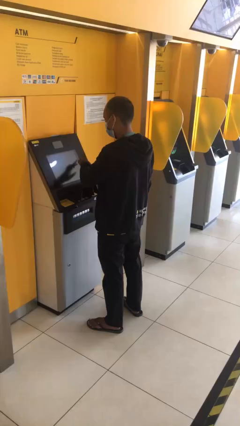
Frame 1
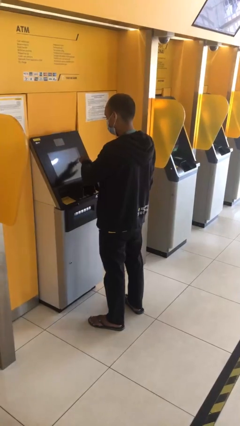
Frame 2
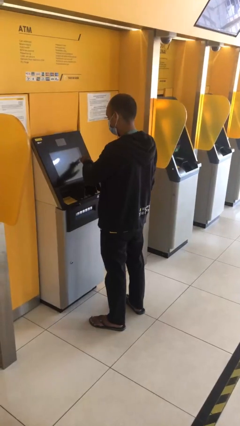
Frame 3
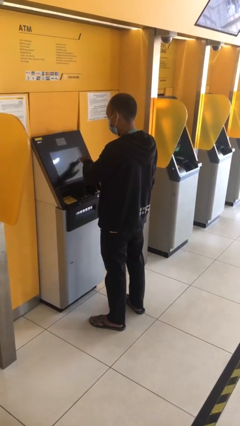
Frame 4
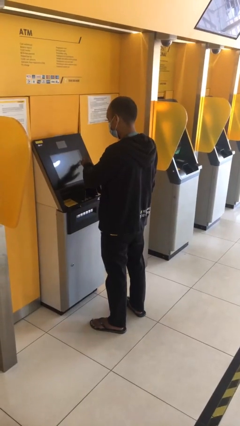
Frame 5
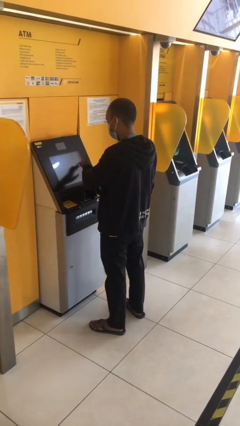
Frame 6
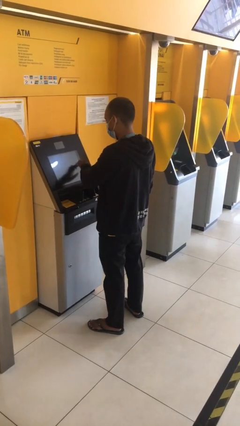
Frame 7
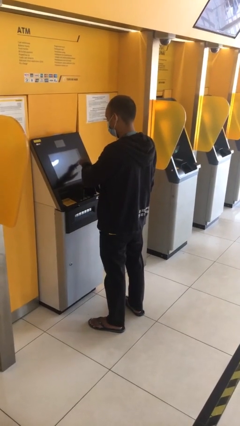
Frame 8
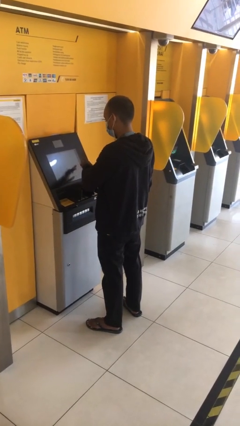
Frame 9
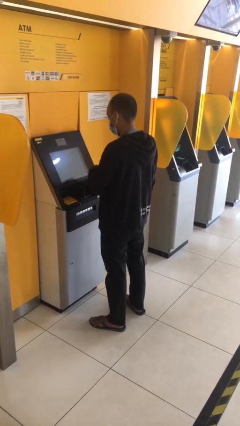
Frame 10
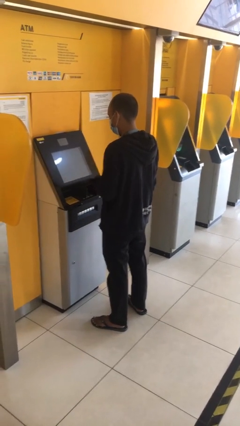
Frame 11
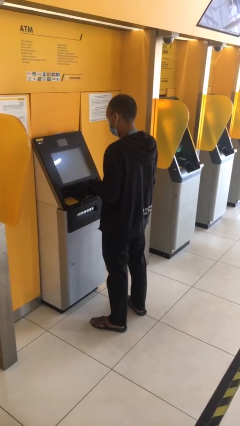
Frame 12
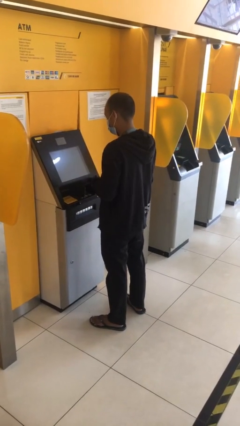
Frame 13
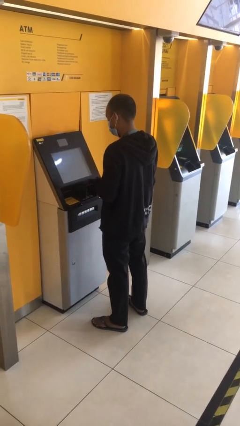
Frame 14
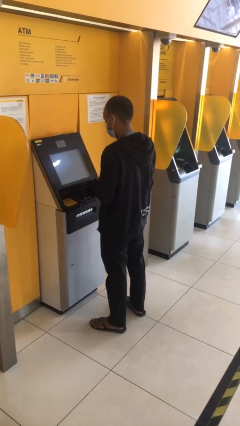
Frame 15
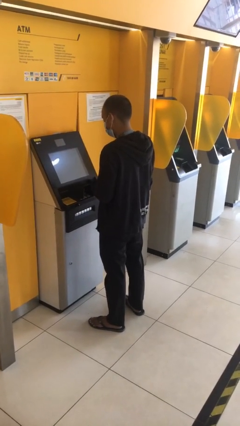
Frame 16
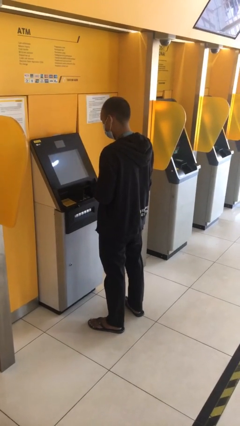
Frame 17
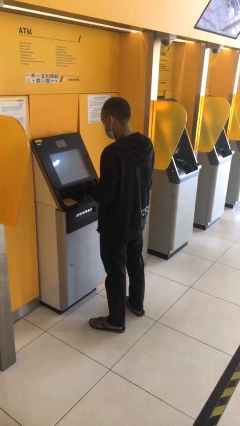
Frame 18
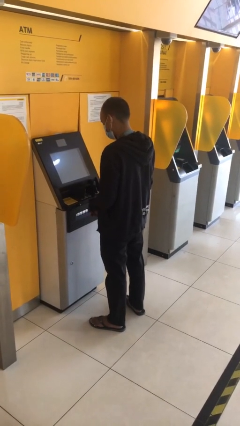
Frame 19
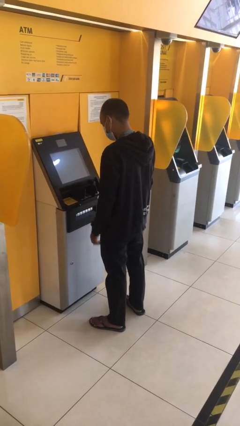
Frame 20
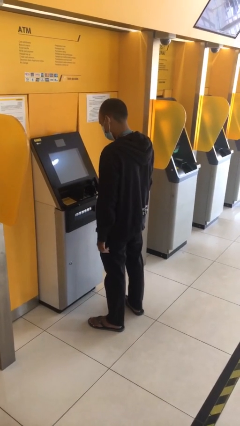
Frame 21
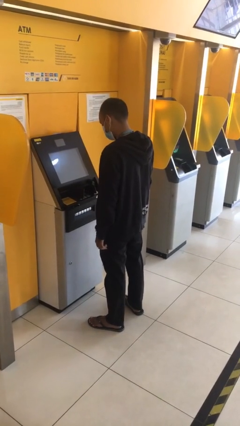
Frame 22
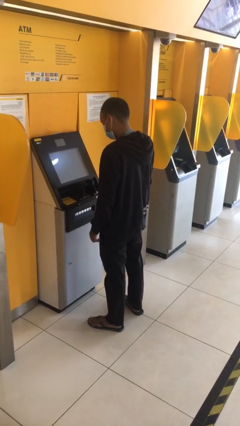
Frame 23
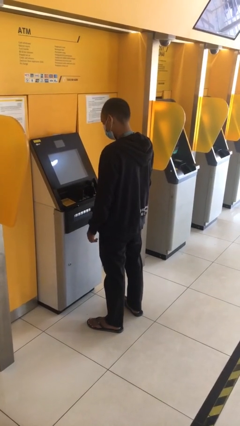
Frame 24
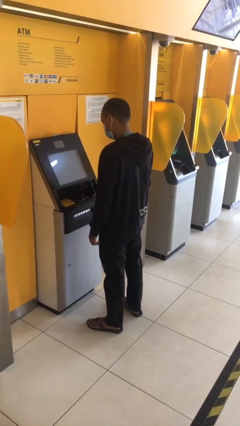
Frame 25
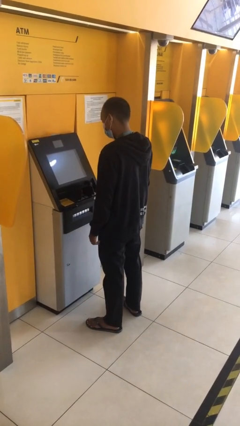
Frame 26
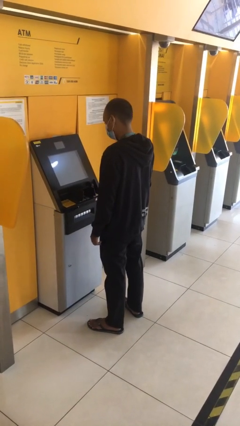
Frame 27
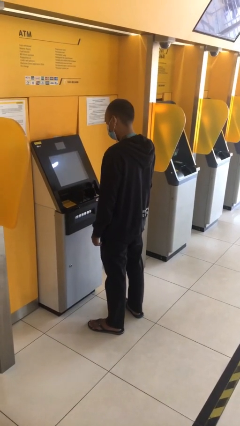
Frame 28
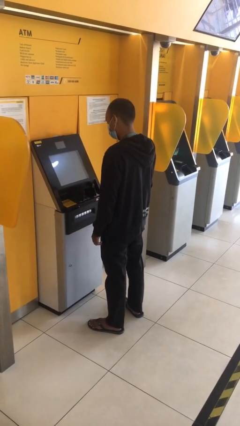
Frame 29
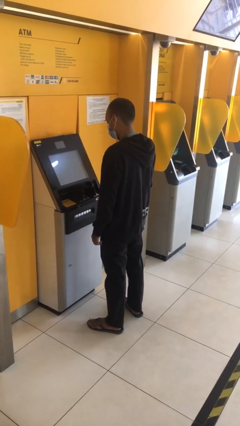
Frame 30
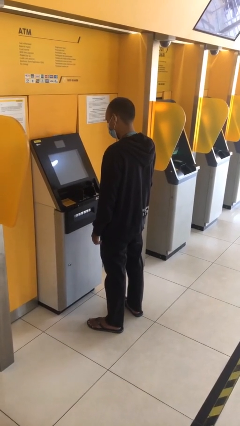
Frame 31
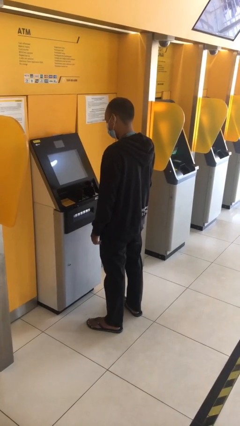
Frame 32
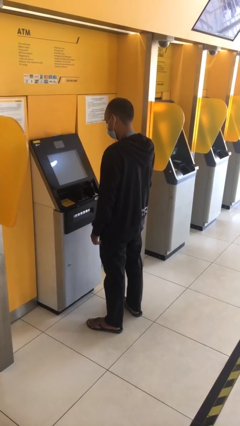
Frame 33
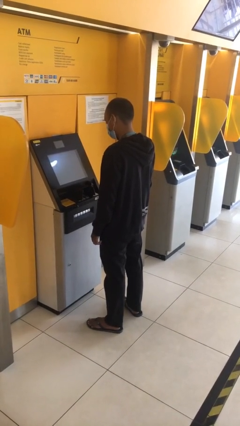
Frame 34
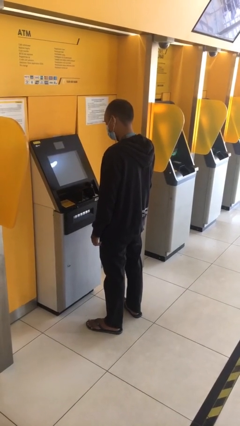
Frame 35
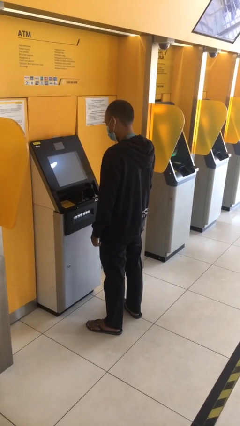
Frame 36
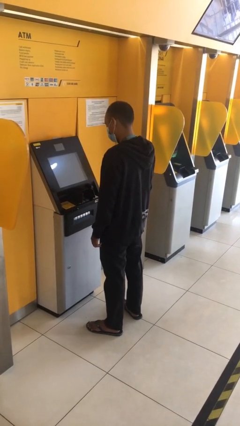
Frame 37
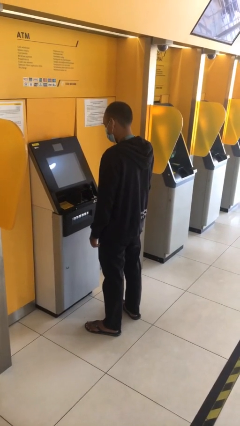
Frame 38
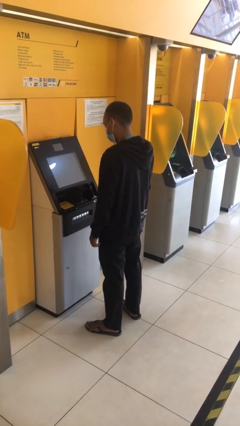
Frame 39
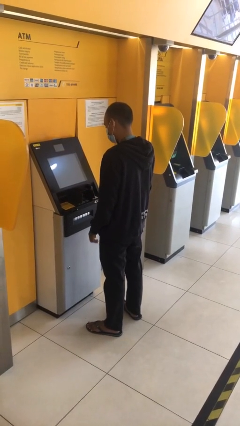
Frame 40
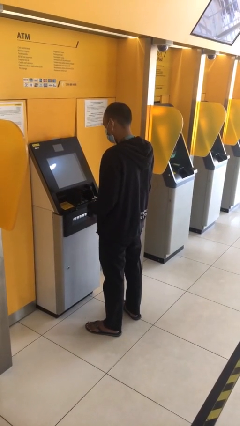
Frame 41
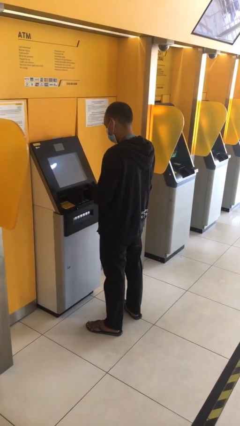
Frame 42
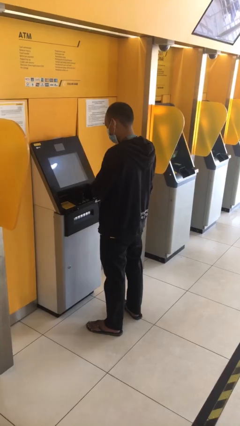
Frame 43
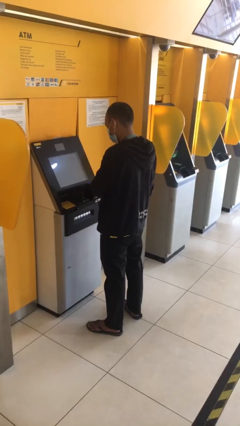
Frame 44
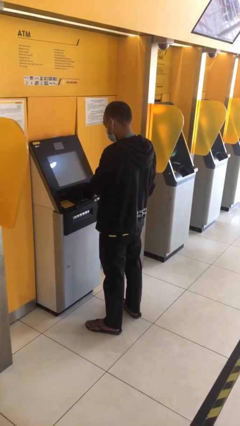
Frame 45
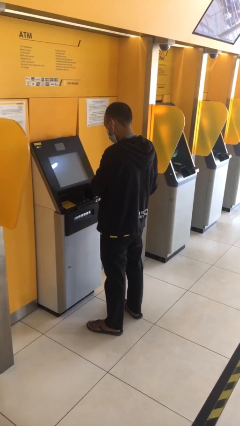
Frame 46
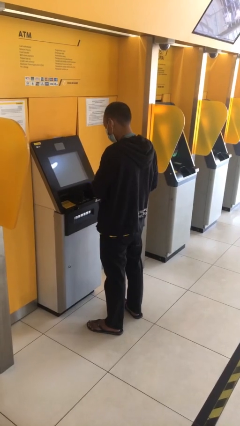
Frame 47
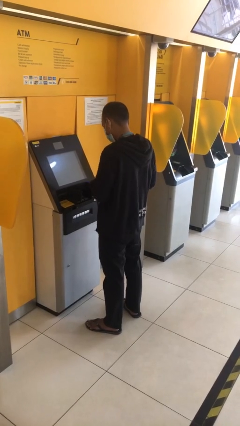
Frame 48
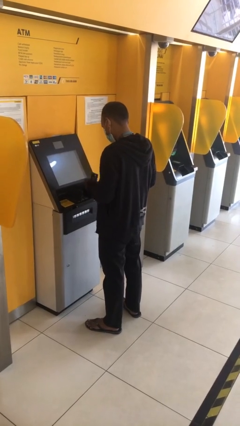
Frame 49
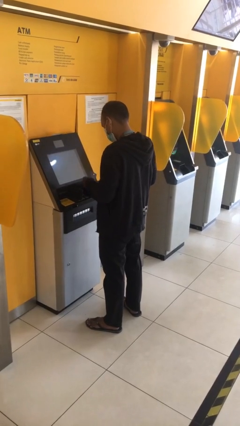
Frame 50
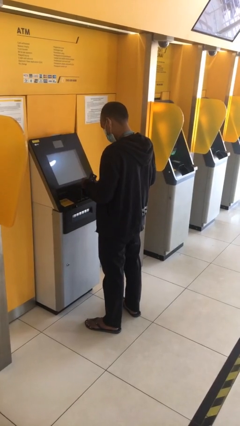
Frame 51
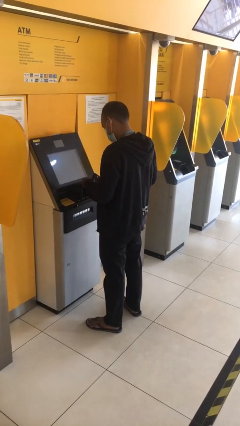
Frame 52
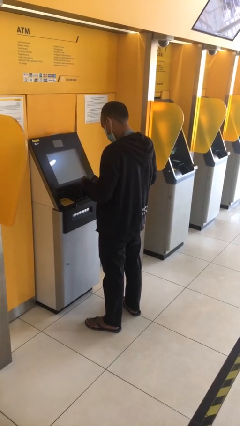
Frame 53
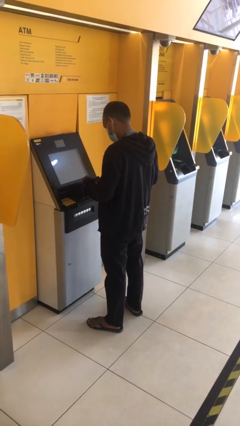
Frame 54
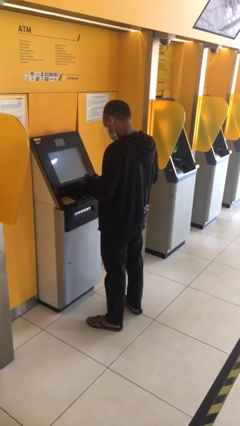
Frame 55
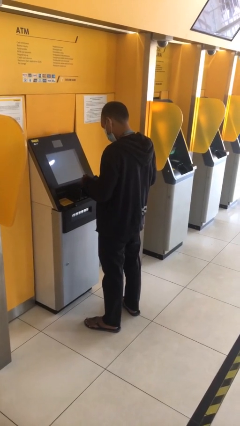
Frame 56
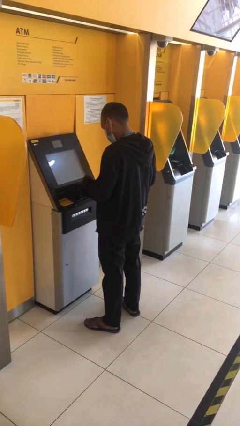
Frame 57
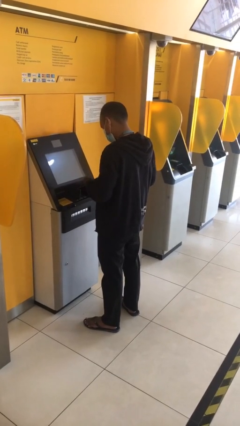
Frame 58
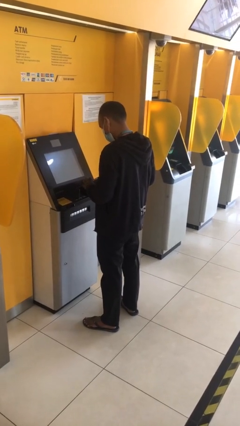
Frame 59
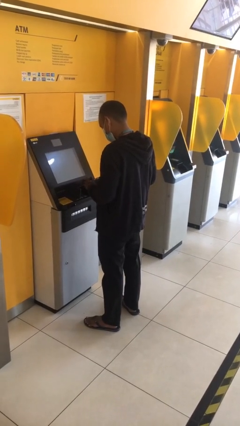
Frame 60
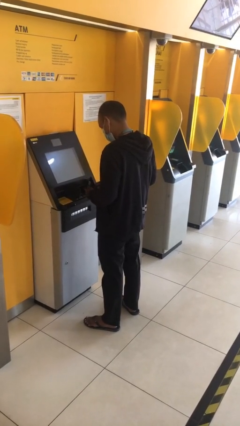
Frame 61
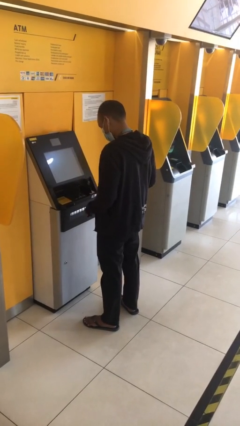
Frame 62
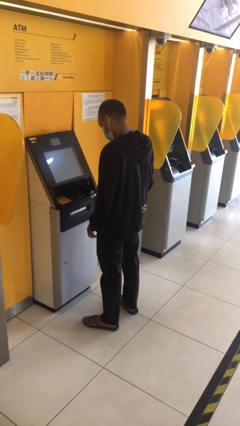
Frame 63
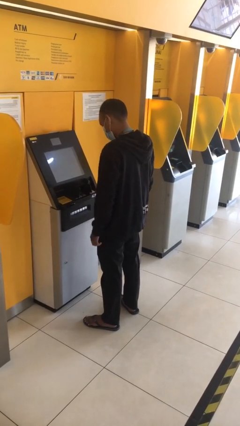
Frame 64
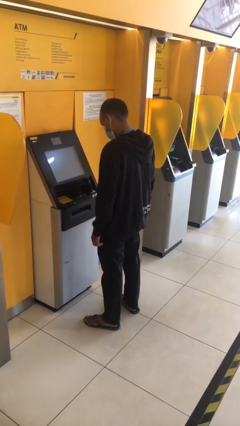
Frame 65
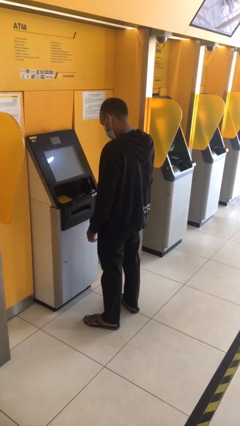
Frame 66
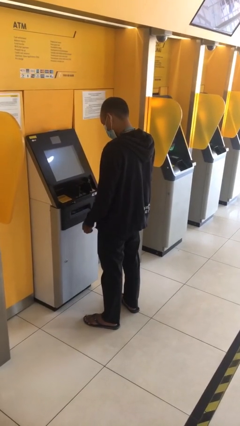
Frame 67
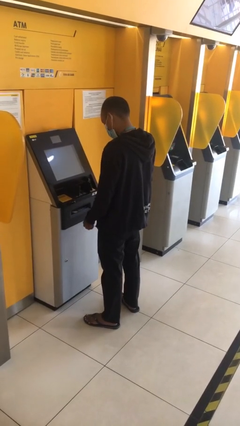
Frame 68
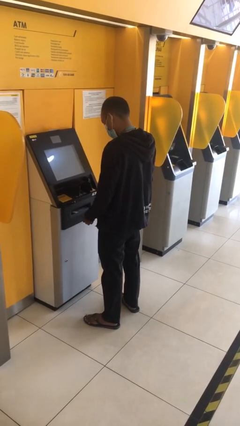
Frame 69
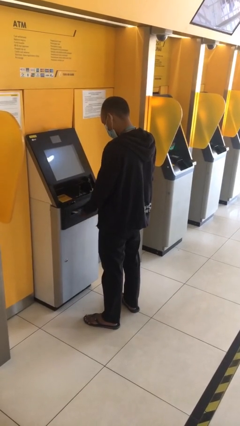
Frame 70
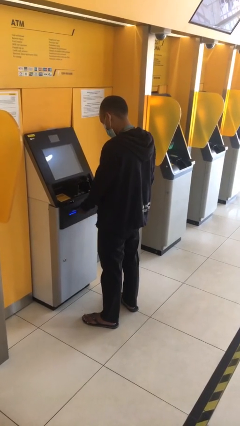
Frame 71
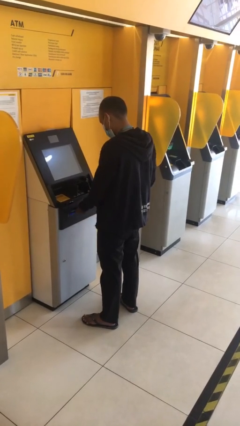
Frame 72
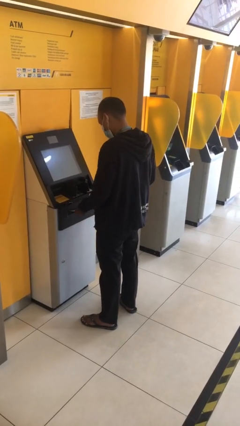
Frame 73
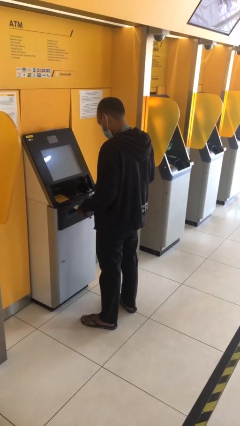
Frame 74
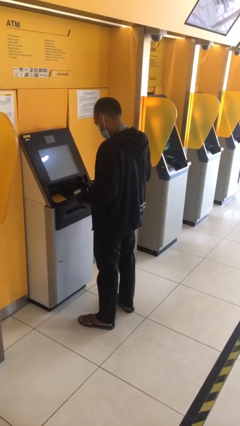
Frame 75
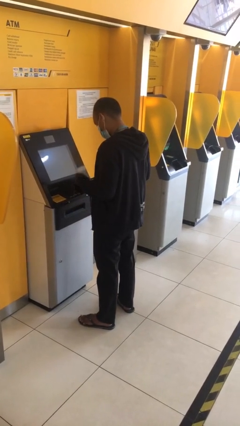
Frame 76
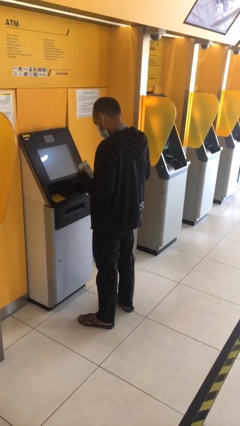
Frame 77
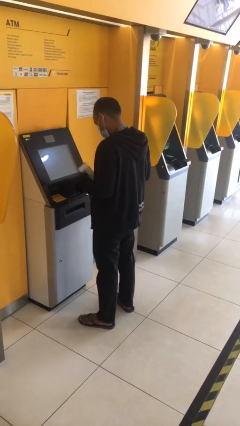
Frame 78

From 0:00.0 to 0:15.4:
person purchases from machine

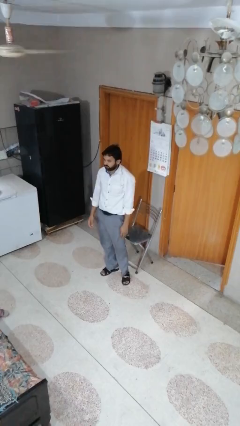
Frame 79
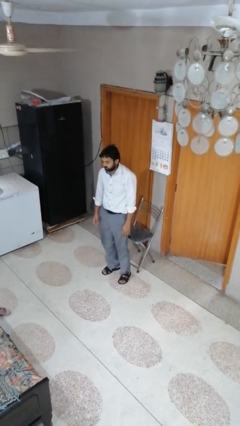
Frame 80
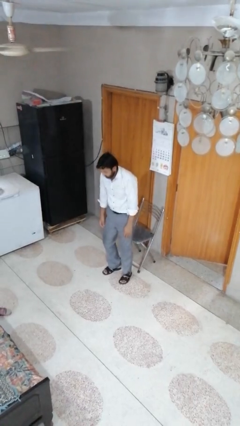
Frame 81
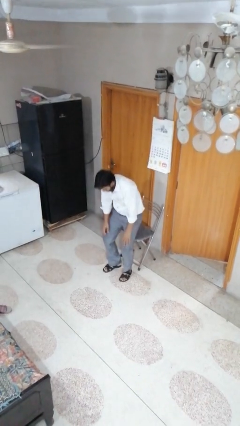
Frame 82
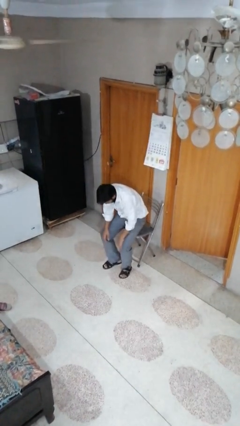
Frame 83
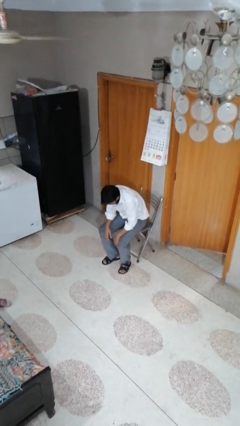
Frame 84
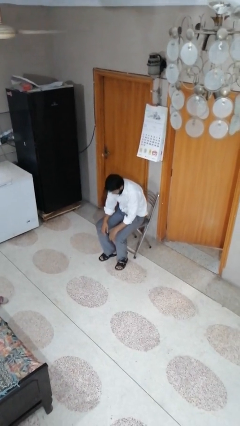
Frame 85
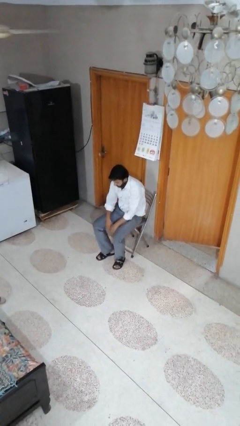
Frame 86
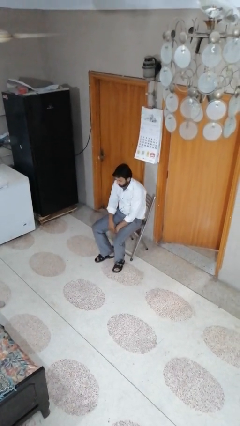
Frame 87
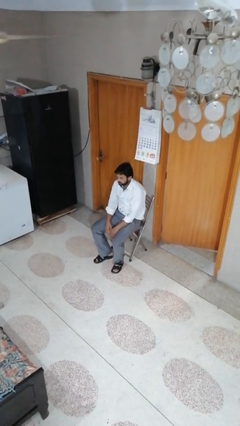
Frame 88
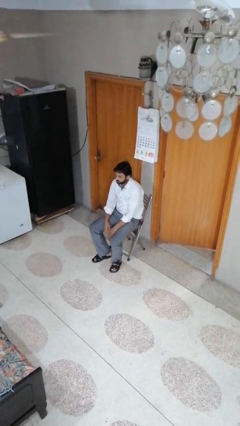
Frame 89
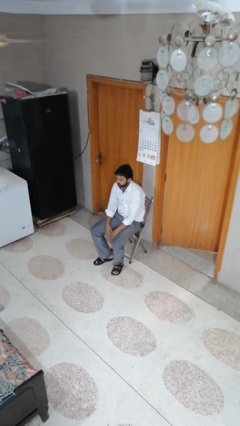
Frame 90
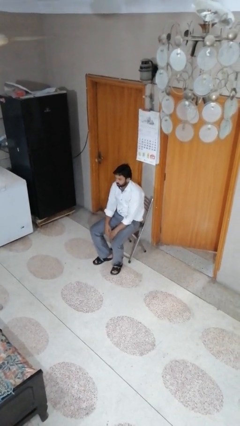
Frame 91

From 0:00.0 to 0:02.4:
person sits down

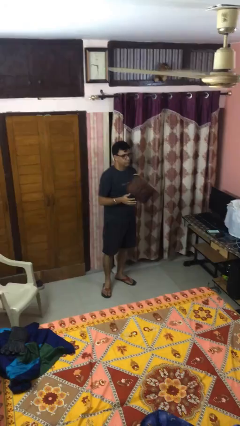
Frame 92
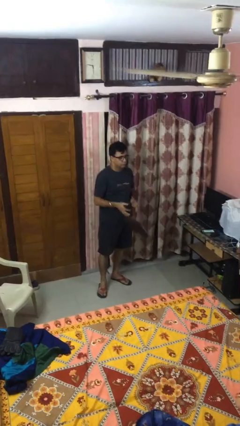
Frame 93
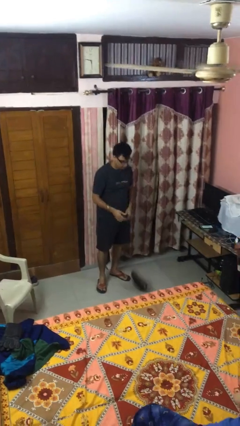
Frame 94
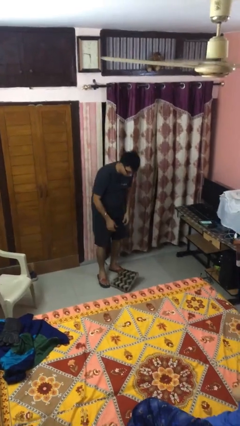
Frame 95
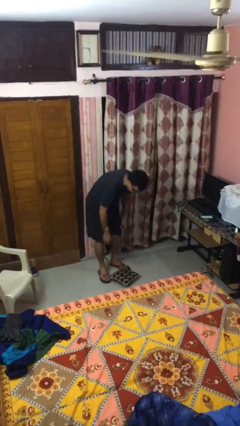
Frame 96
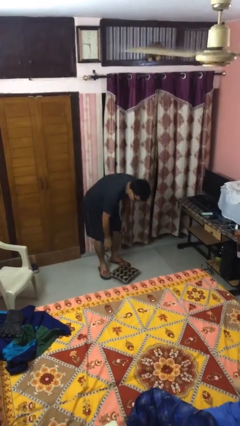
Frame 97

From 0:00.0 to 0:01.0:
person drops object
